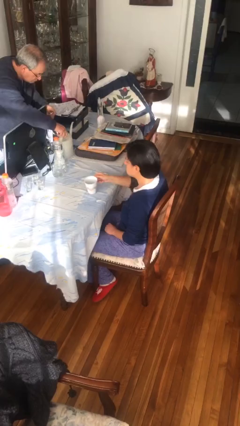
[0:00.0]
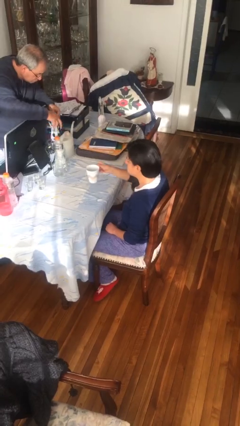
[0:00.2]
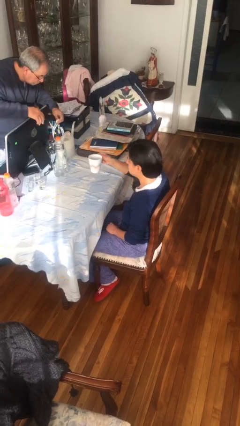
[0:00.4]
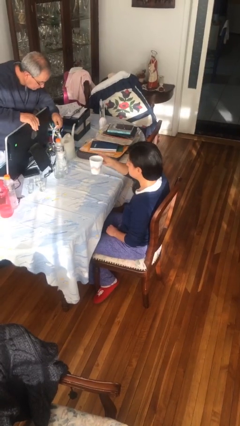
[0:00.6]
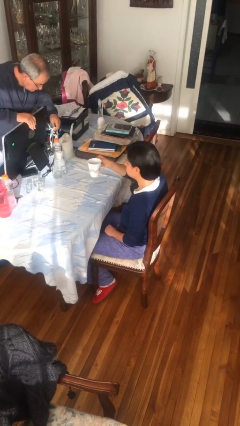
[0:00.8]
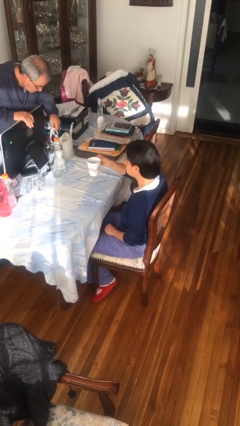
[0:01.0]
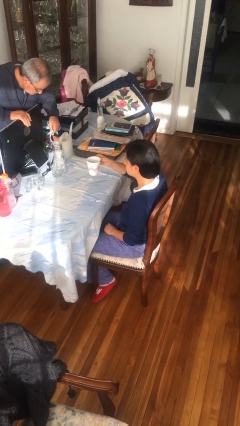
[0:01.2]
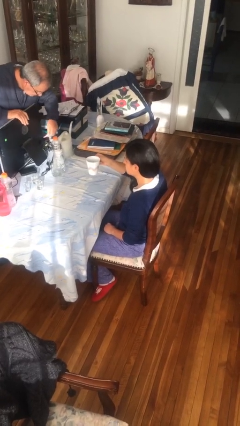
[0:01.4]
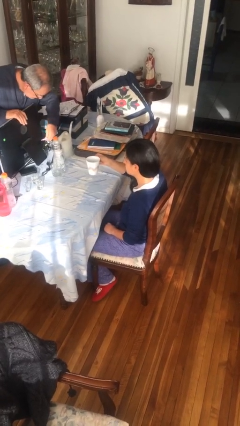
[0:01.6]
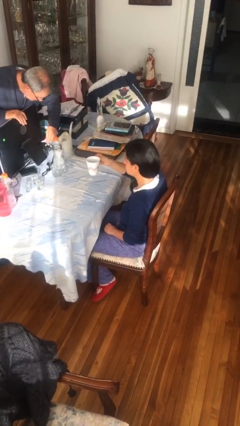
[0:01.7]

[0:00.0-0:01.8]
person picks up object from table

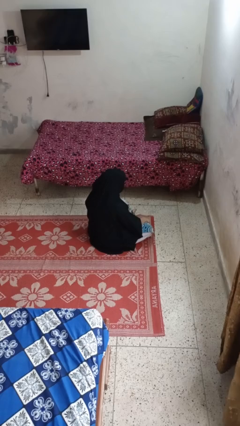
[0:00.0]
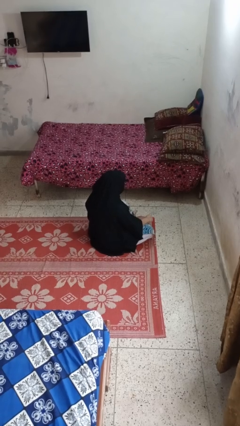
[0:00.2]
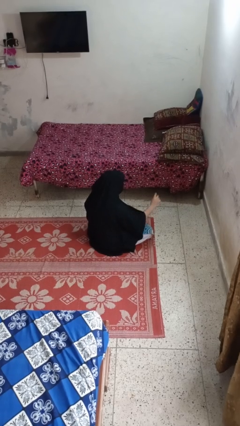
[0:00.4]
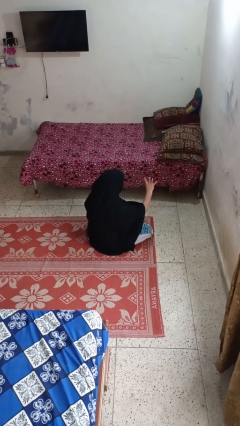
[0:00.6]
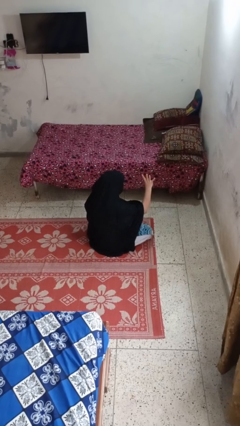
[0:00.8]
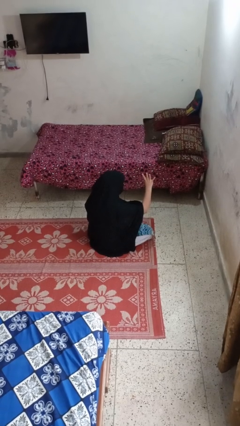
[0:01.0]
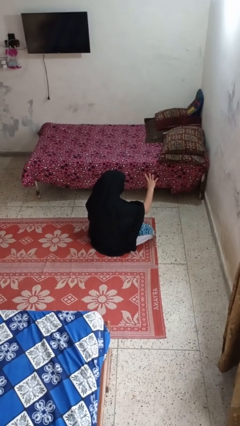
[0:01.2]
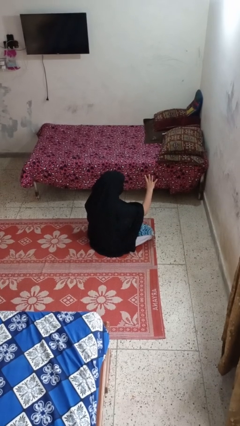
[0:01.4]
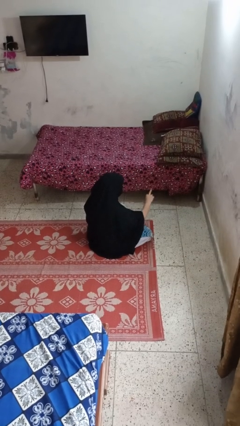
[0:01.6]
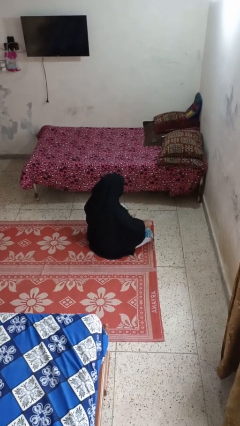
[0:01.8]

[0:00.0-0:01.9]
person gestures number four

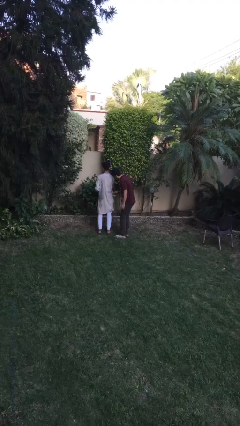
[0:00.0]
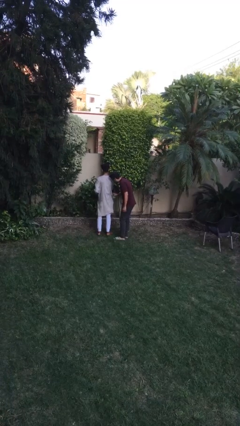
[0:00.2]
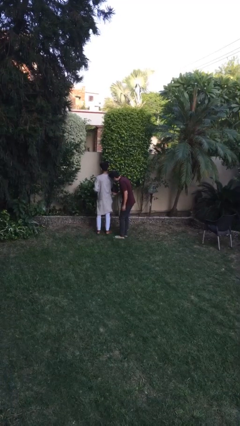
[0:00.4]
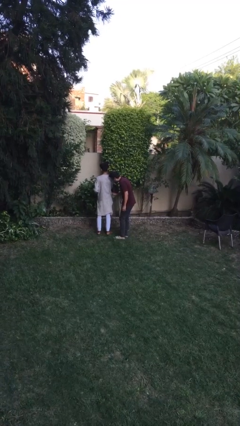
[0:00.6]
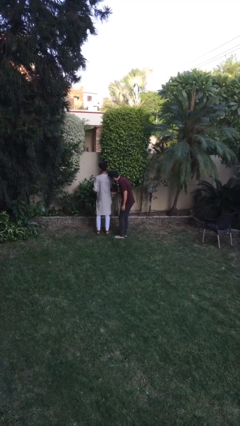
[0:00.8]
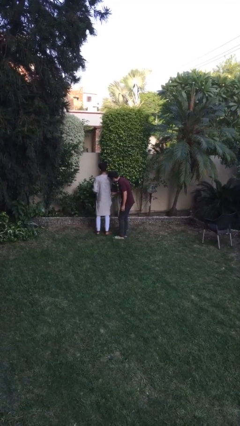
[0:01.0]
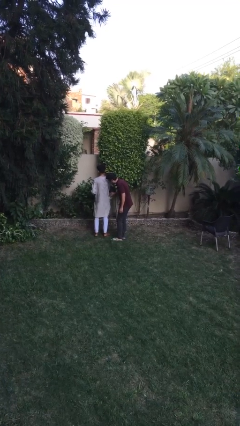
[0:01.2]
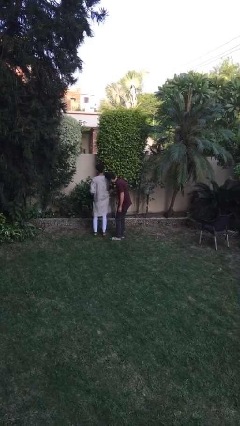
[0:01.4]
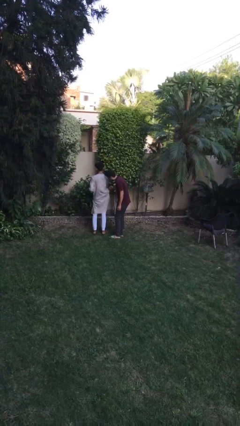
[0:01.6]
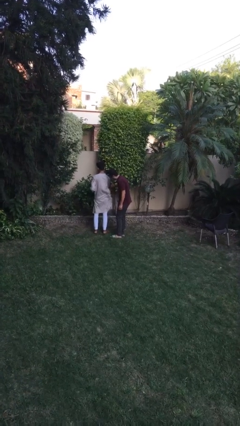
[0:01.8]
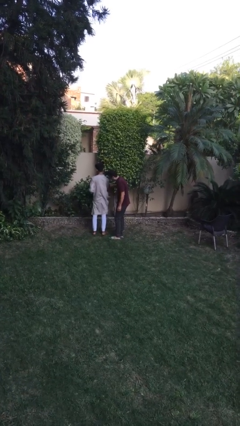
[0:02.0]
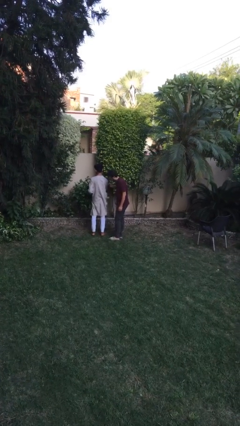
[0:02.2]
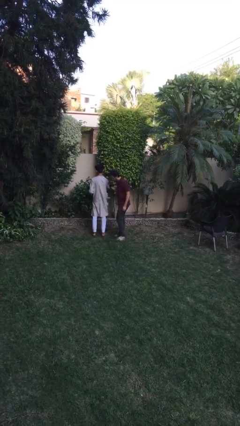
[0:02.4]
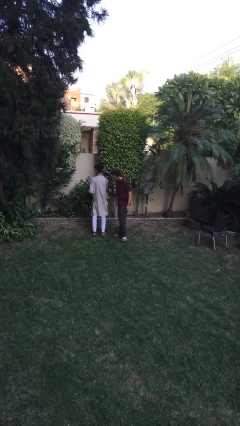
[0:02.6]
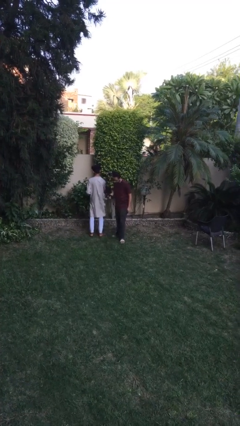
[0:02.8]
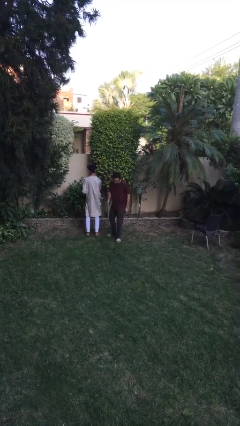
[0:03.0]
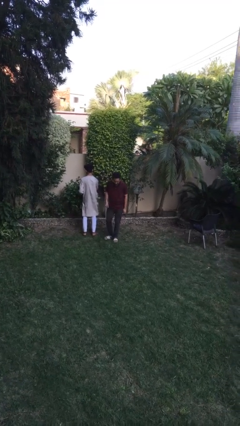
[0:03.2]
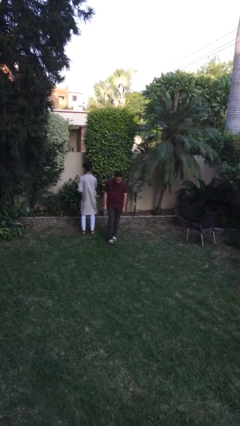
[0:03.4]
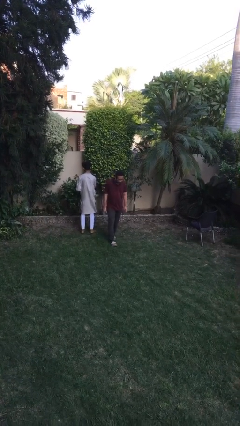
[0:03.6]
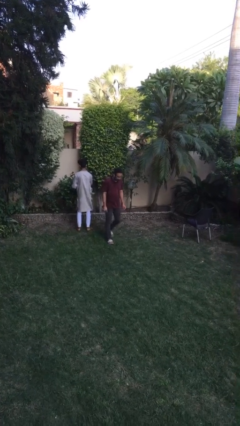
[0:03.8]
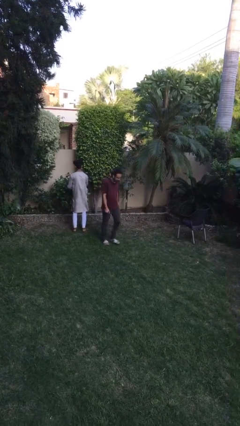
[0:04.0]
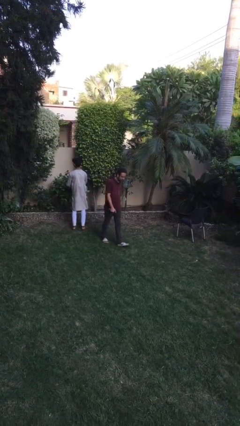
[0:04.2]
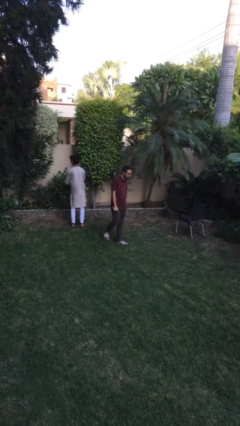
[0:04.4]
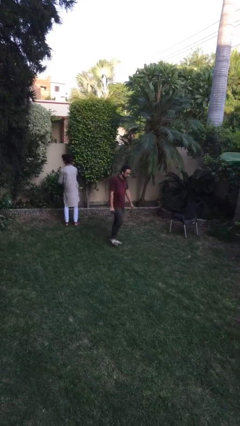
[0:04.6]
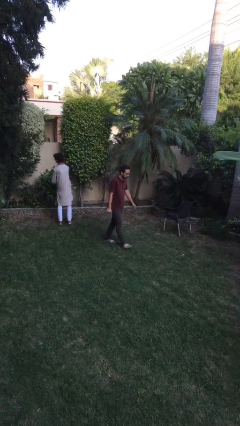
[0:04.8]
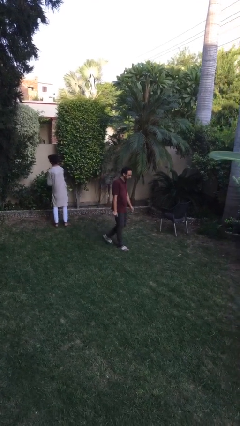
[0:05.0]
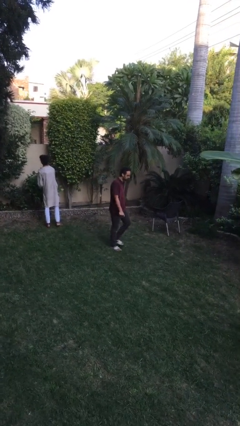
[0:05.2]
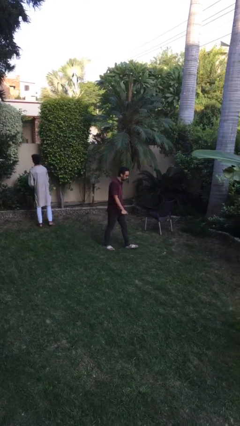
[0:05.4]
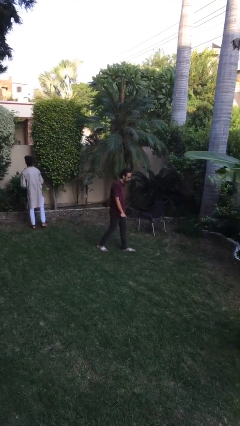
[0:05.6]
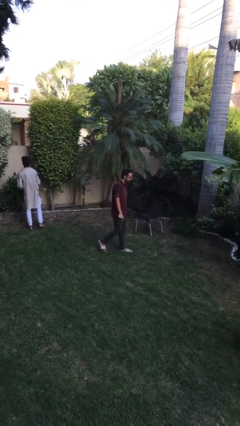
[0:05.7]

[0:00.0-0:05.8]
person steals object from person

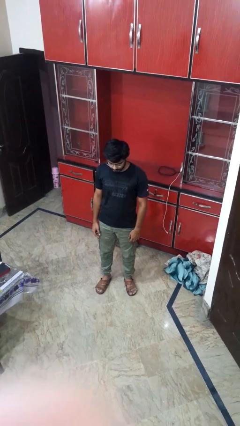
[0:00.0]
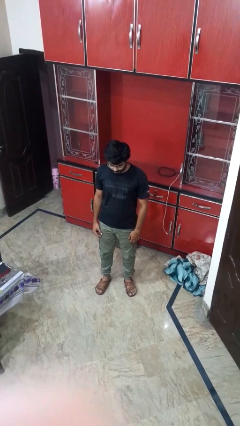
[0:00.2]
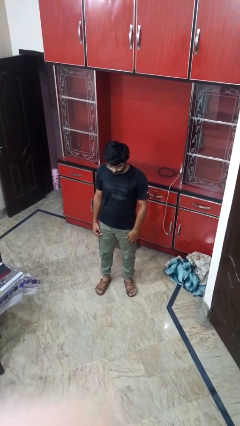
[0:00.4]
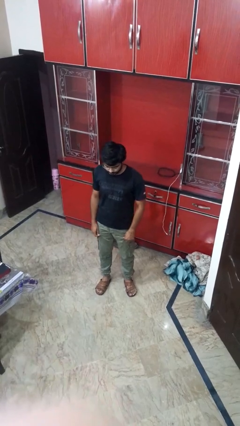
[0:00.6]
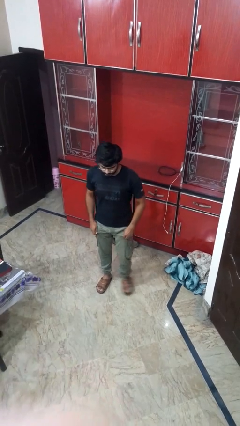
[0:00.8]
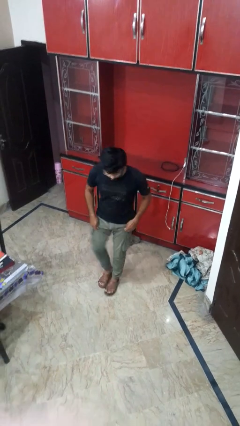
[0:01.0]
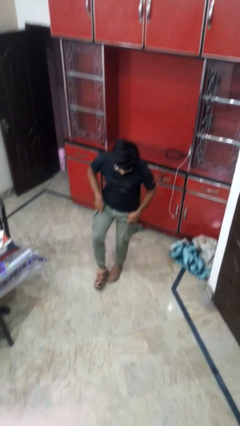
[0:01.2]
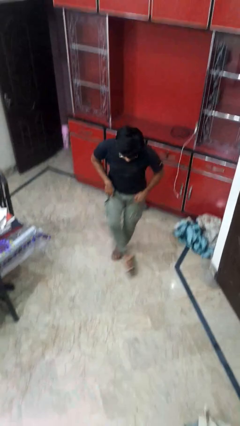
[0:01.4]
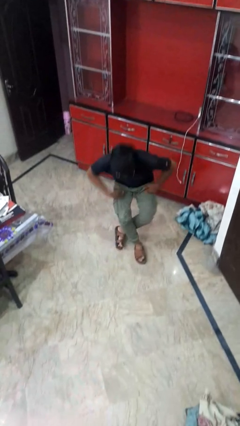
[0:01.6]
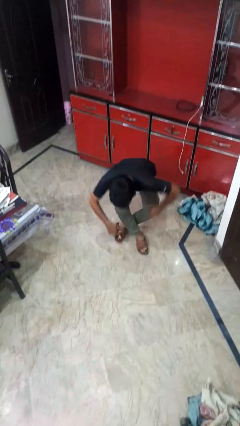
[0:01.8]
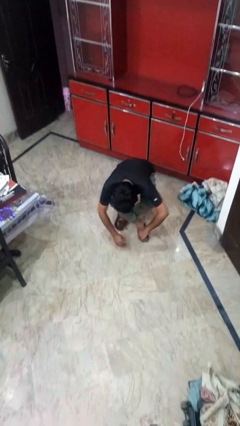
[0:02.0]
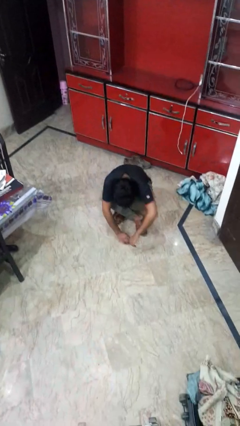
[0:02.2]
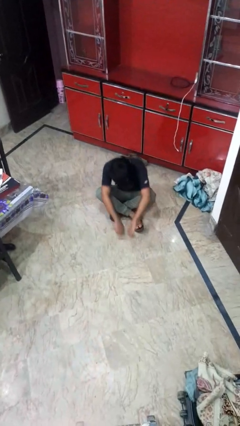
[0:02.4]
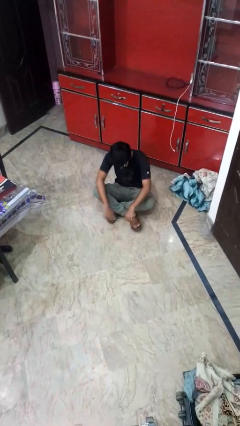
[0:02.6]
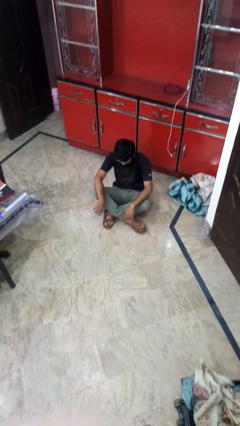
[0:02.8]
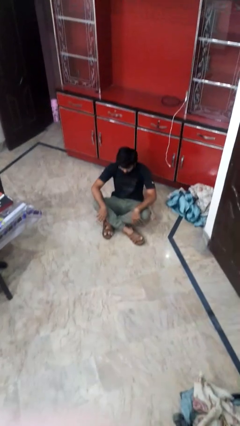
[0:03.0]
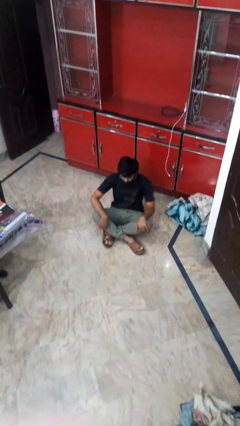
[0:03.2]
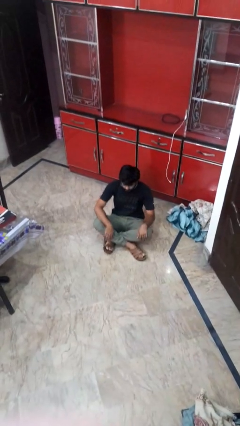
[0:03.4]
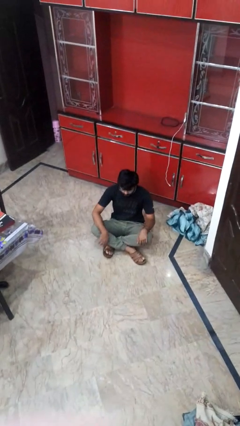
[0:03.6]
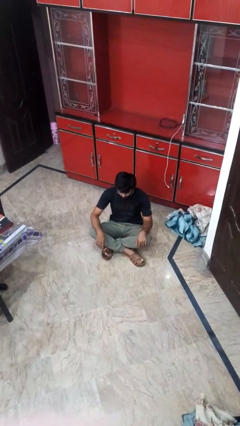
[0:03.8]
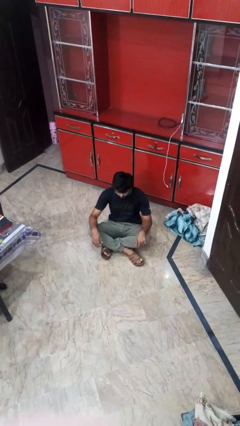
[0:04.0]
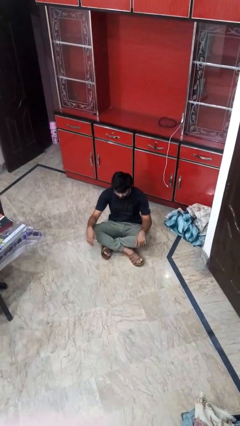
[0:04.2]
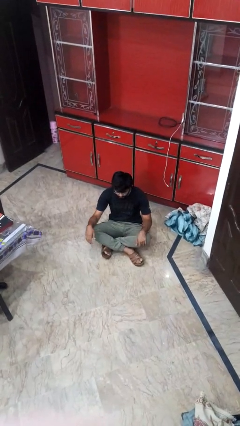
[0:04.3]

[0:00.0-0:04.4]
person sits crisscross

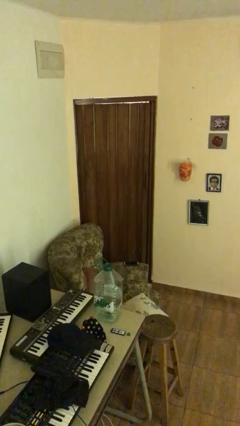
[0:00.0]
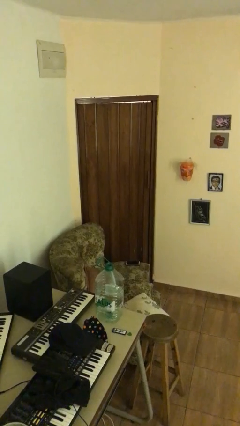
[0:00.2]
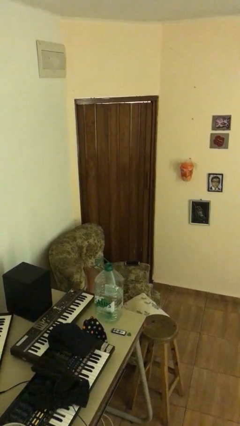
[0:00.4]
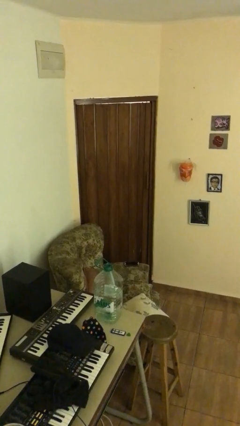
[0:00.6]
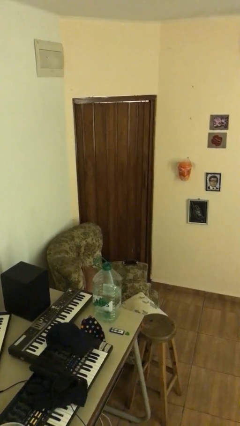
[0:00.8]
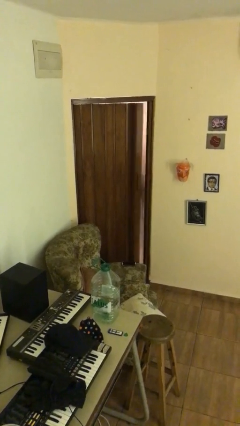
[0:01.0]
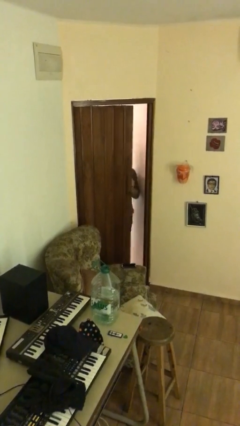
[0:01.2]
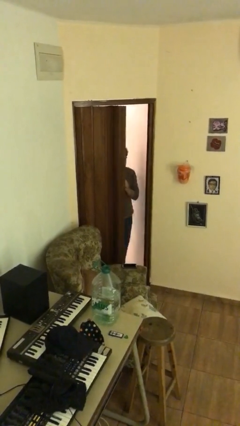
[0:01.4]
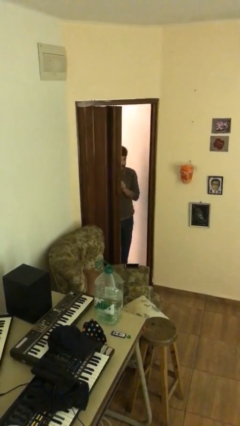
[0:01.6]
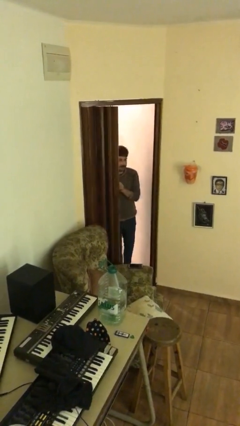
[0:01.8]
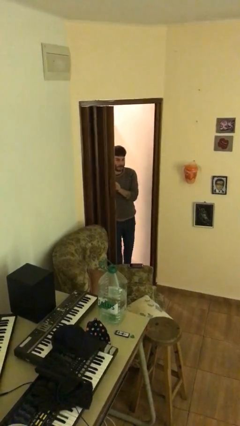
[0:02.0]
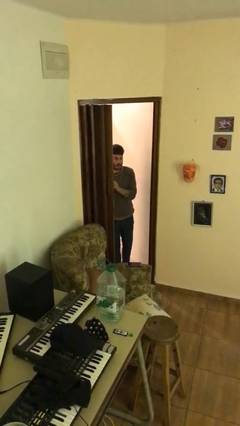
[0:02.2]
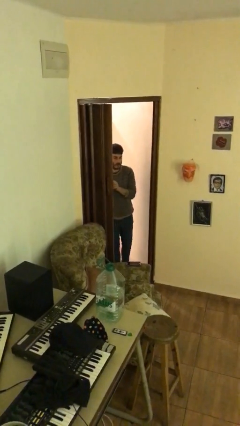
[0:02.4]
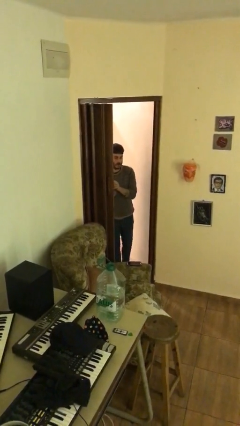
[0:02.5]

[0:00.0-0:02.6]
person opens sliding door

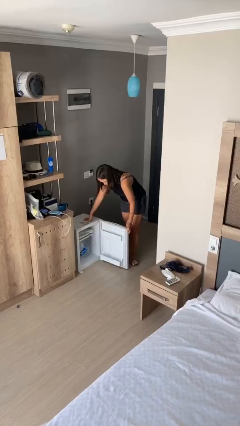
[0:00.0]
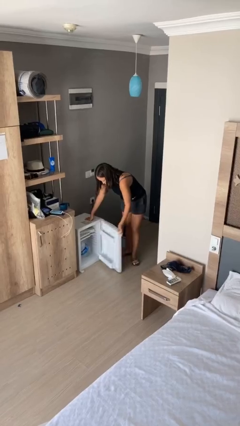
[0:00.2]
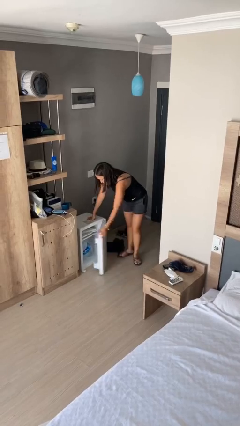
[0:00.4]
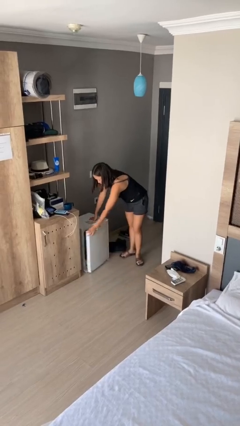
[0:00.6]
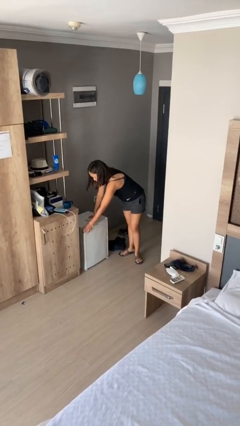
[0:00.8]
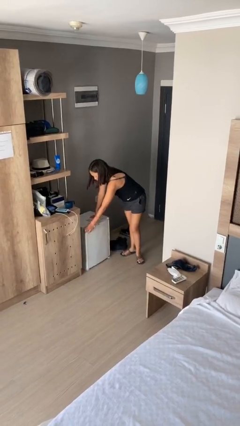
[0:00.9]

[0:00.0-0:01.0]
person closes refrigerator
